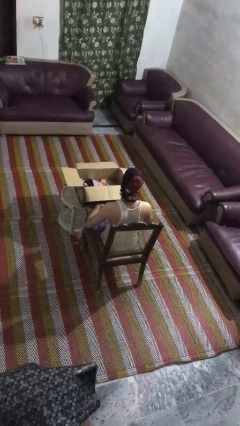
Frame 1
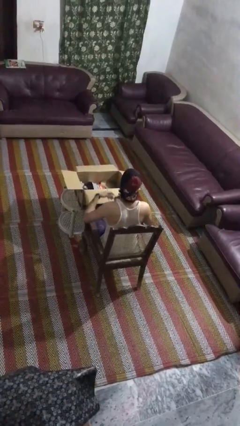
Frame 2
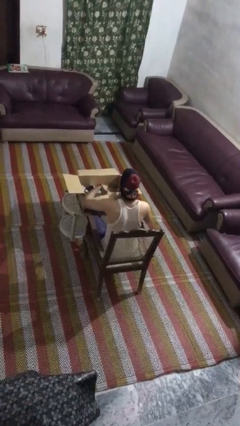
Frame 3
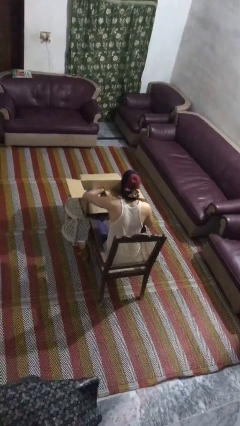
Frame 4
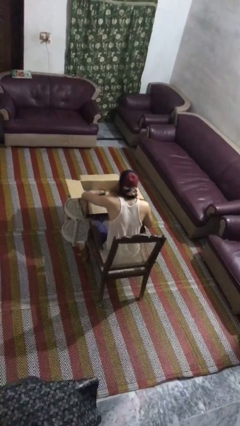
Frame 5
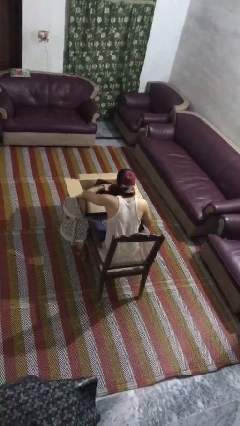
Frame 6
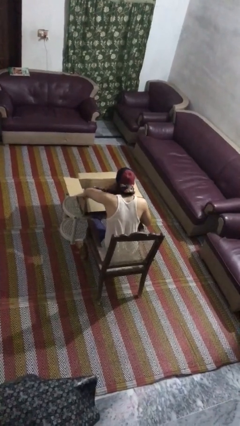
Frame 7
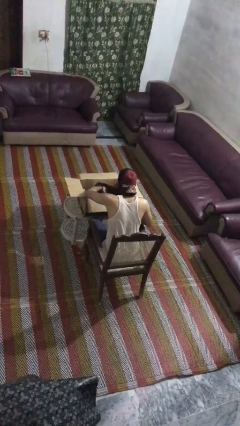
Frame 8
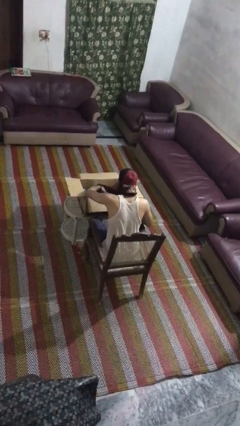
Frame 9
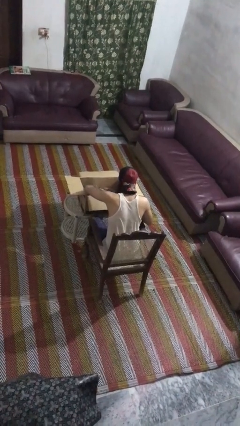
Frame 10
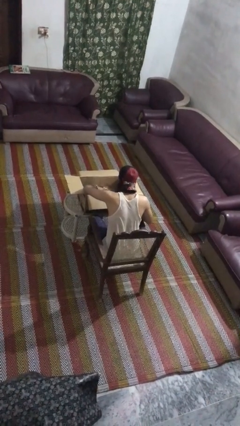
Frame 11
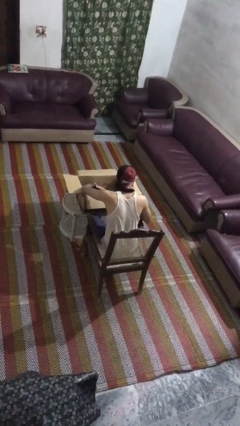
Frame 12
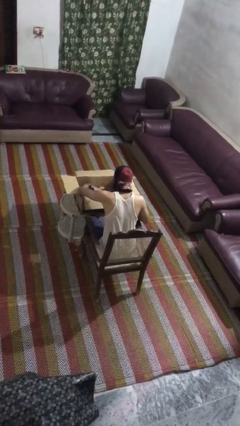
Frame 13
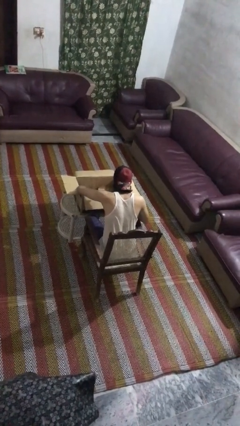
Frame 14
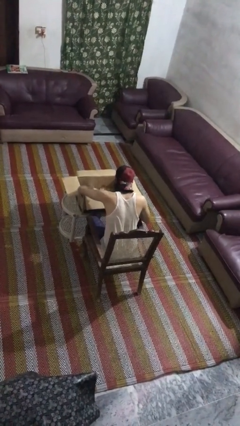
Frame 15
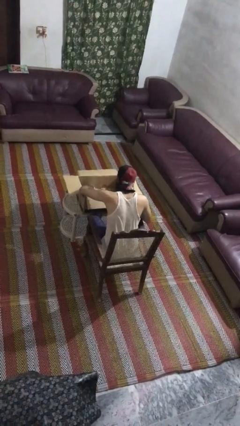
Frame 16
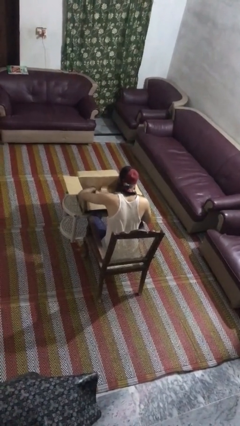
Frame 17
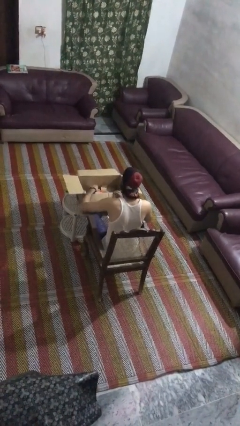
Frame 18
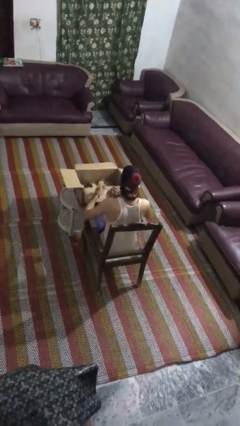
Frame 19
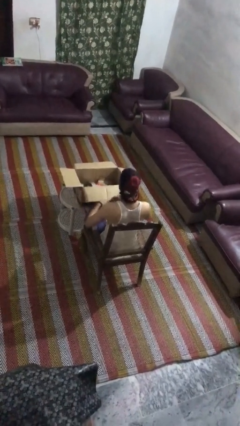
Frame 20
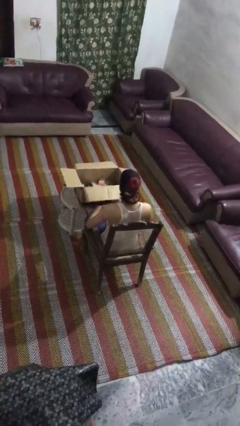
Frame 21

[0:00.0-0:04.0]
person searches in box

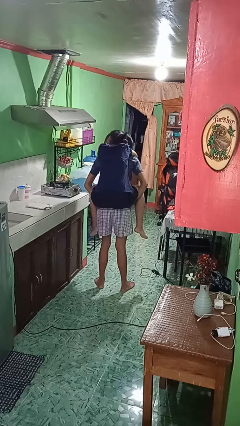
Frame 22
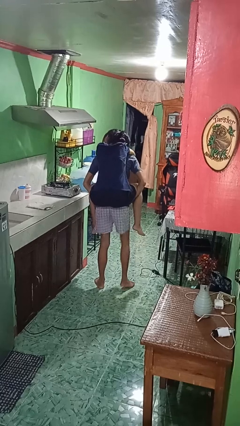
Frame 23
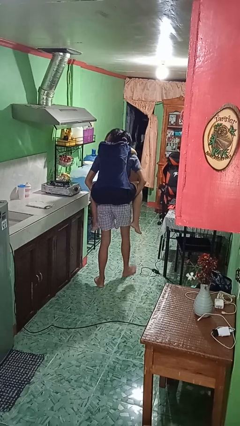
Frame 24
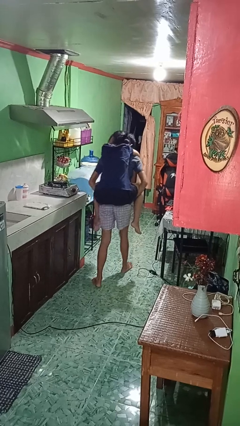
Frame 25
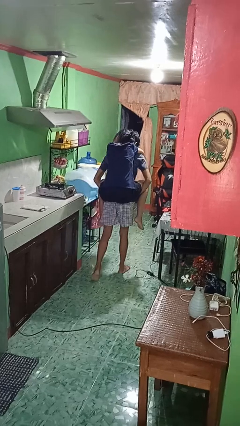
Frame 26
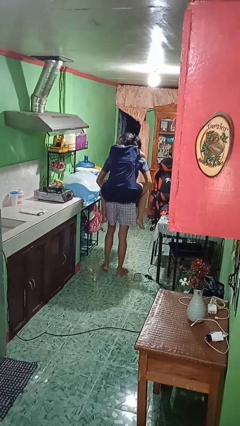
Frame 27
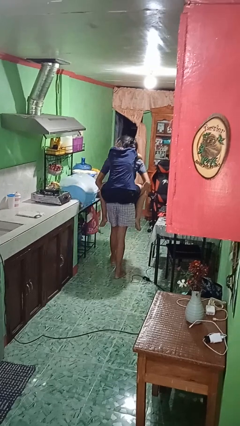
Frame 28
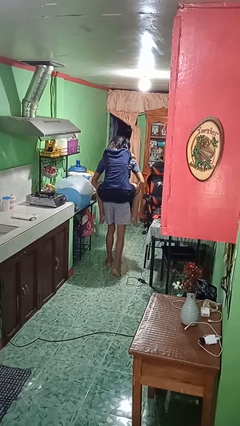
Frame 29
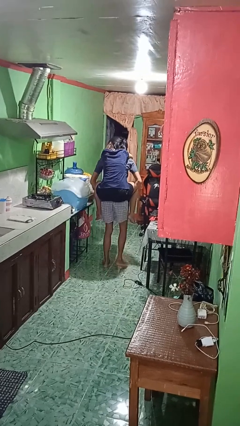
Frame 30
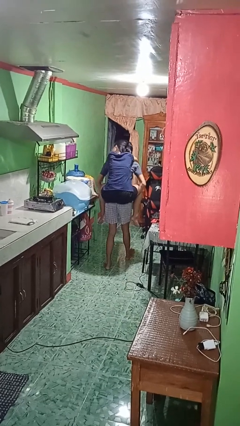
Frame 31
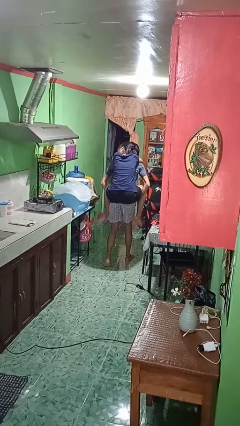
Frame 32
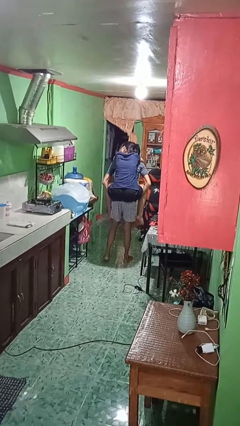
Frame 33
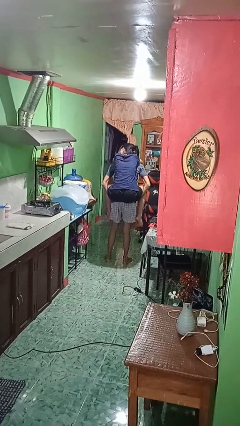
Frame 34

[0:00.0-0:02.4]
person carries person on back

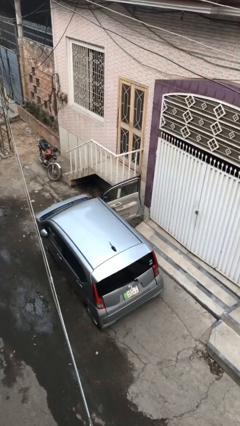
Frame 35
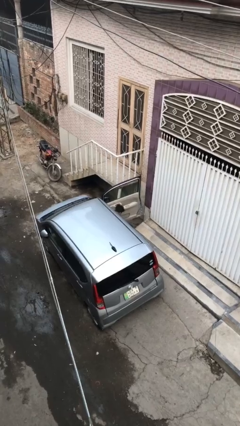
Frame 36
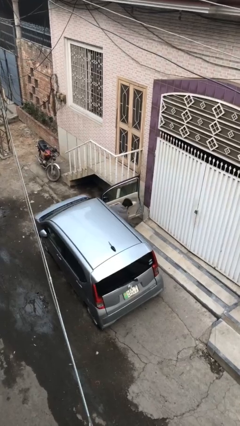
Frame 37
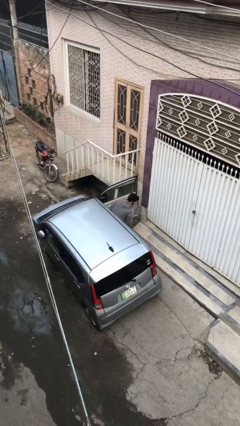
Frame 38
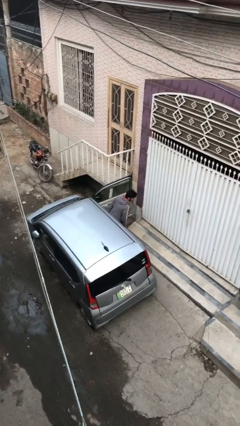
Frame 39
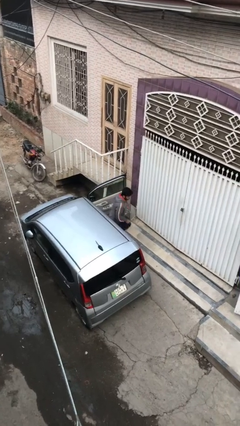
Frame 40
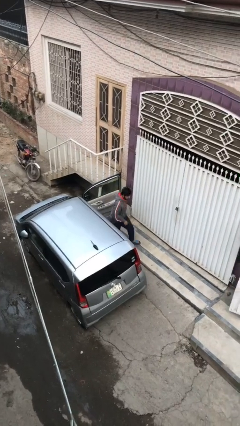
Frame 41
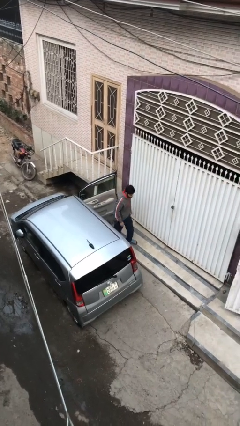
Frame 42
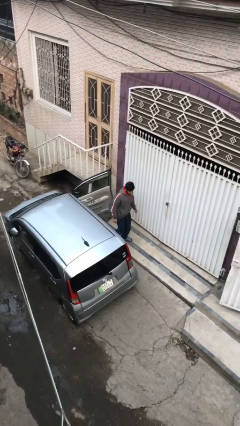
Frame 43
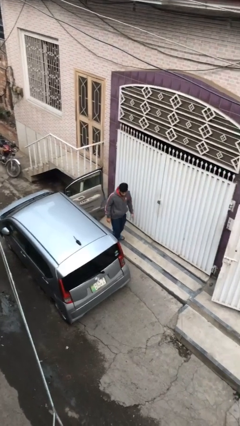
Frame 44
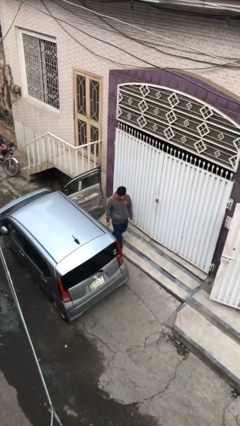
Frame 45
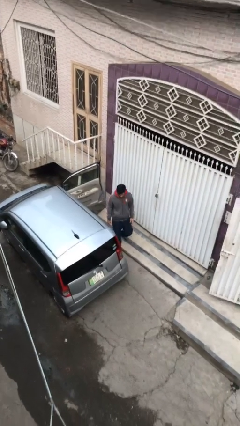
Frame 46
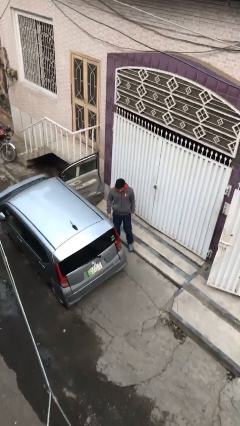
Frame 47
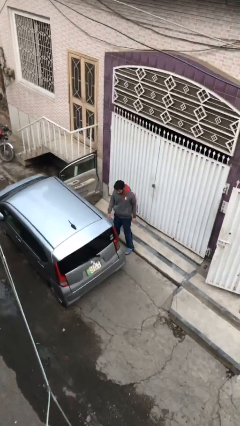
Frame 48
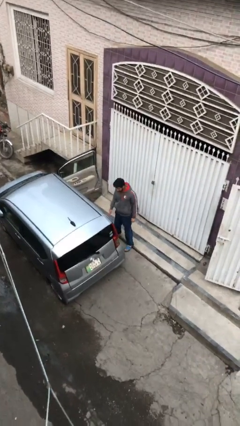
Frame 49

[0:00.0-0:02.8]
person exits car

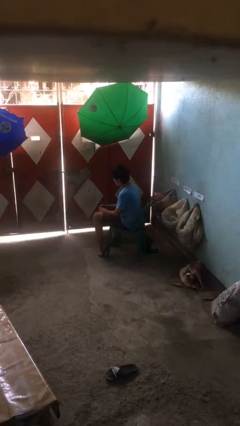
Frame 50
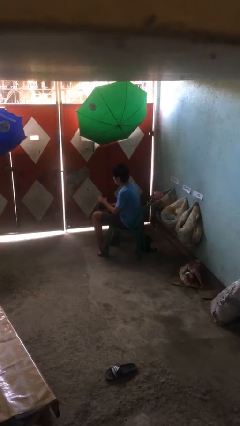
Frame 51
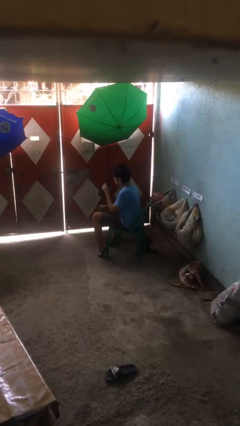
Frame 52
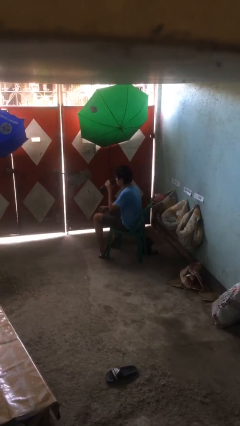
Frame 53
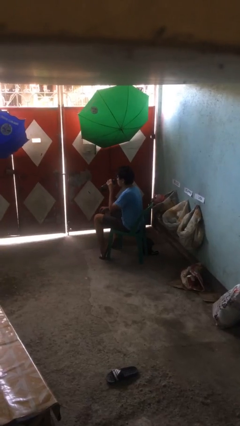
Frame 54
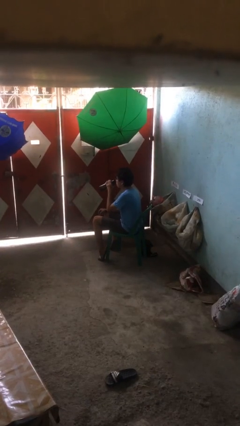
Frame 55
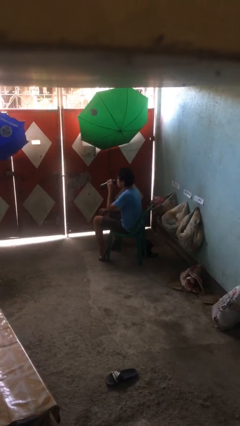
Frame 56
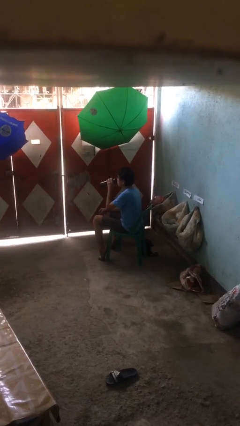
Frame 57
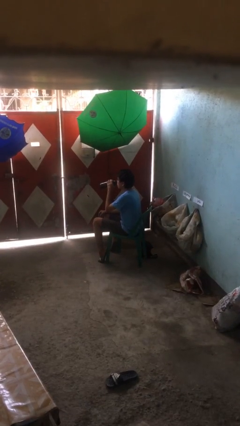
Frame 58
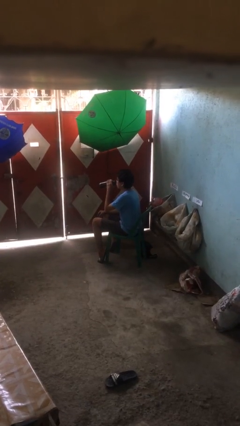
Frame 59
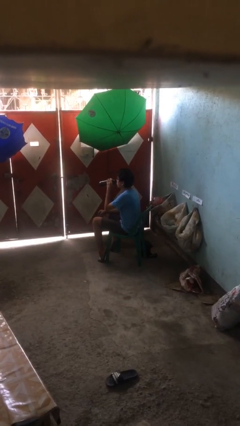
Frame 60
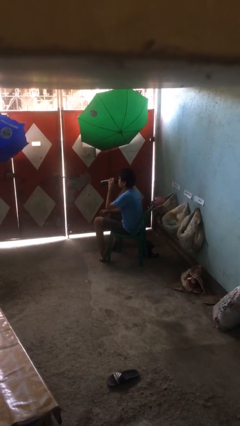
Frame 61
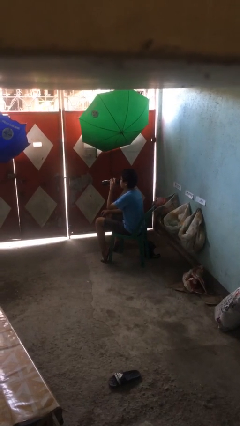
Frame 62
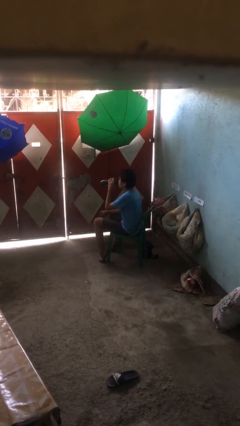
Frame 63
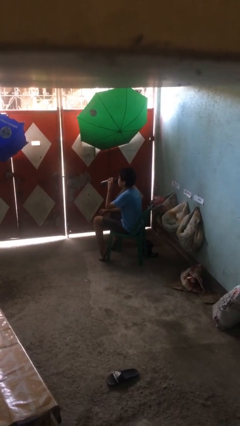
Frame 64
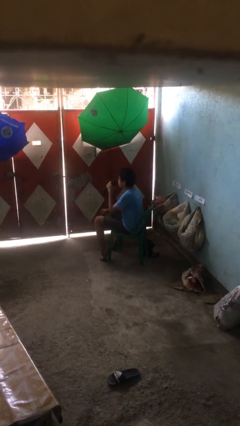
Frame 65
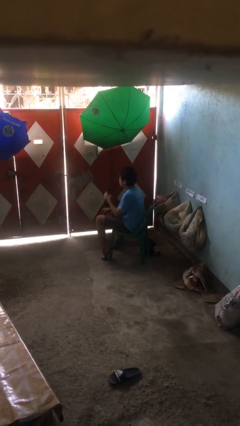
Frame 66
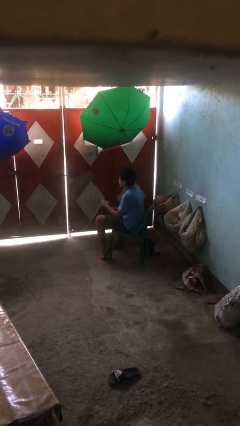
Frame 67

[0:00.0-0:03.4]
person drinks from bottle

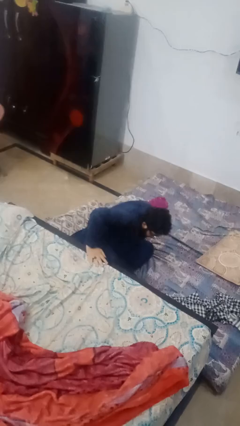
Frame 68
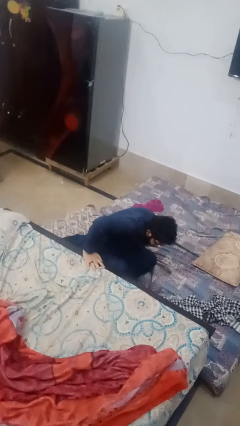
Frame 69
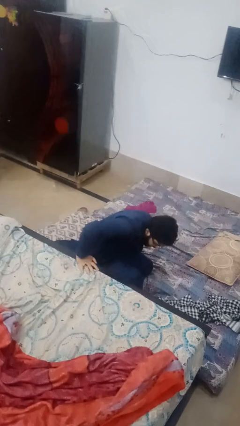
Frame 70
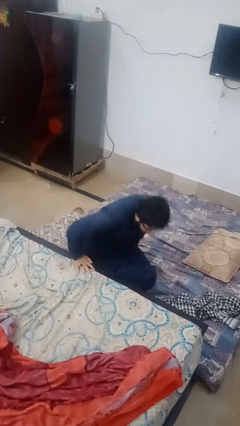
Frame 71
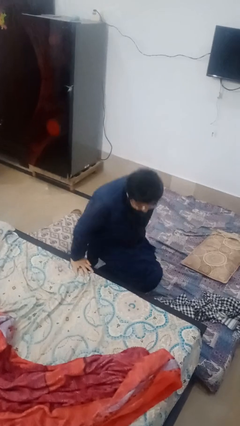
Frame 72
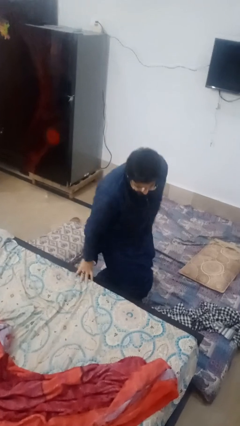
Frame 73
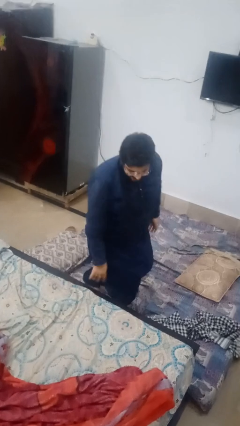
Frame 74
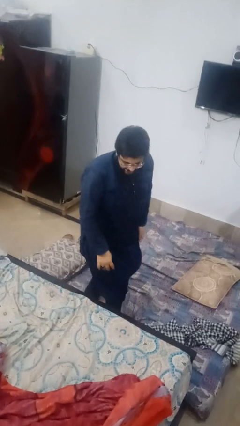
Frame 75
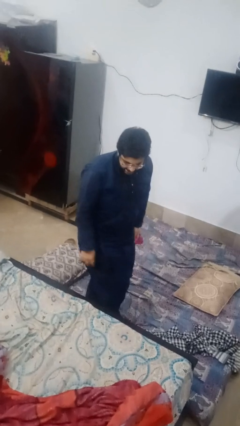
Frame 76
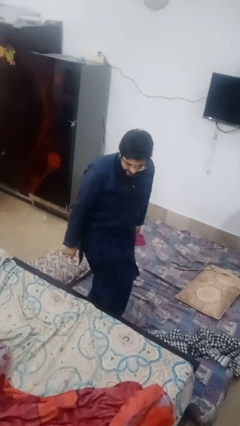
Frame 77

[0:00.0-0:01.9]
person stands up from floor

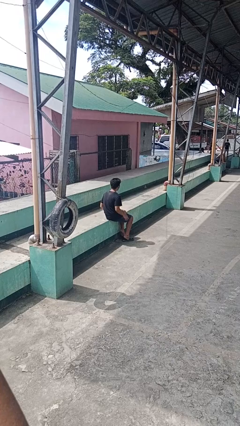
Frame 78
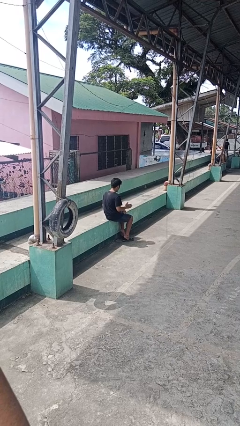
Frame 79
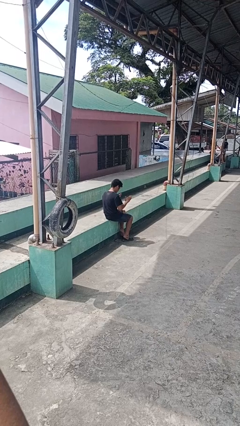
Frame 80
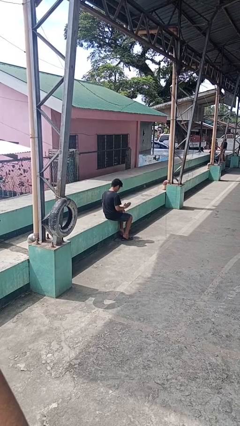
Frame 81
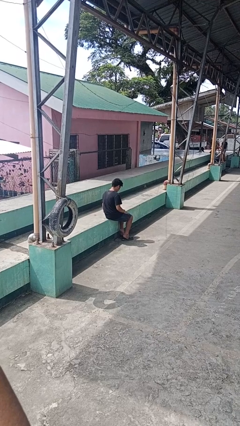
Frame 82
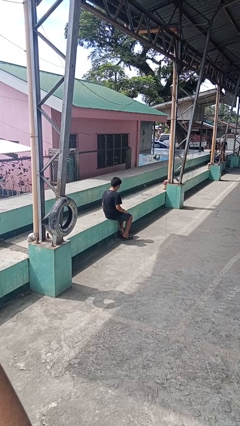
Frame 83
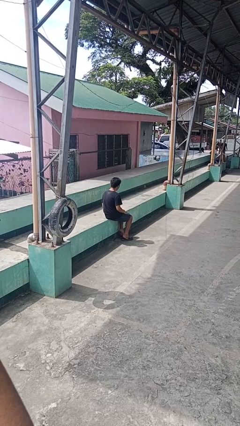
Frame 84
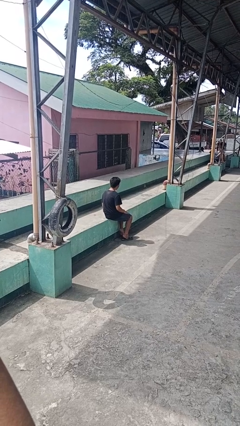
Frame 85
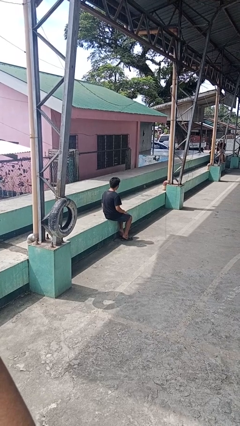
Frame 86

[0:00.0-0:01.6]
person slaps hands on thighs

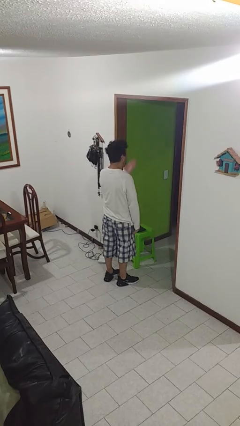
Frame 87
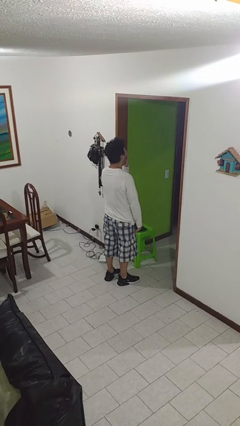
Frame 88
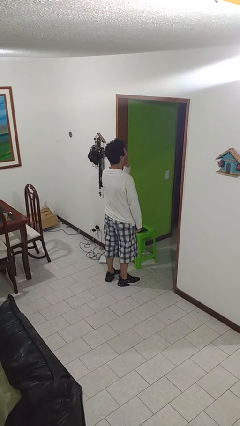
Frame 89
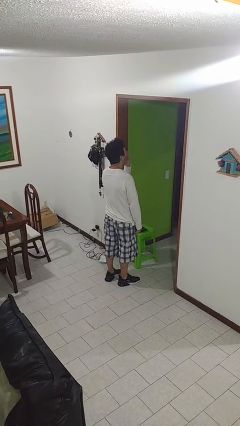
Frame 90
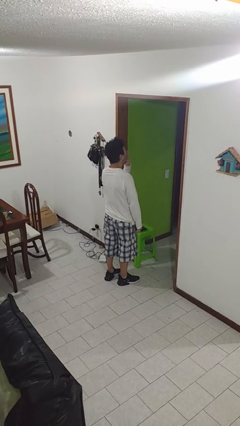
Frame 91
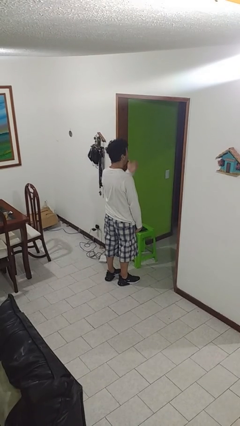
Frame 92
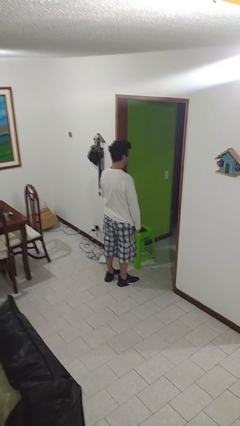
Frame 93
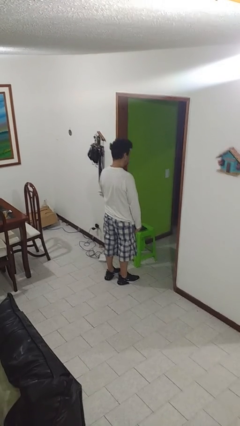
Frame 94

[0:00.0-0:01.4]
person yawns
